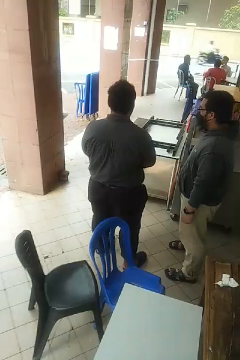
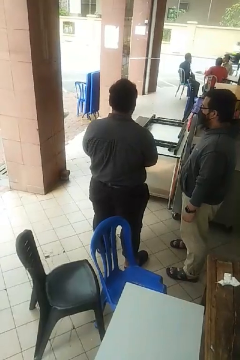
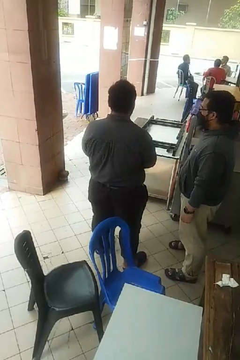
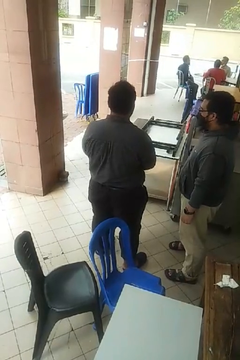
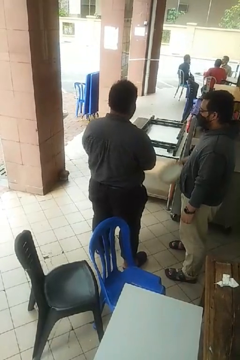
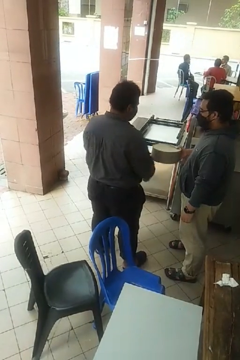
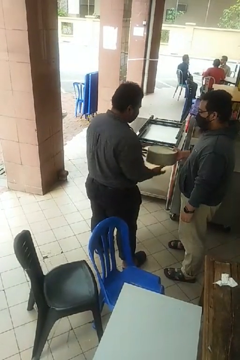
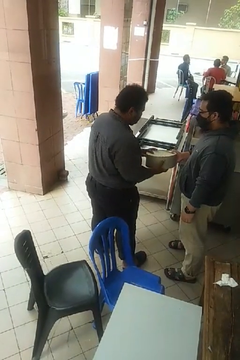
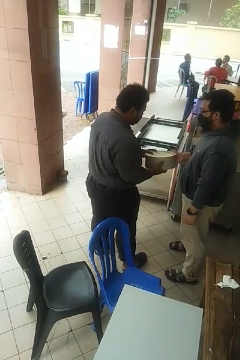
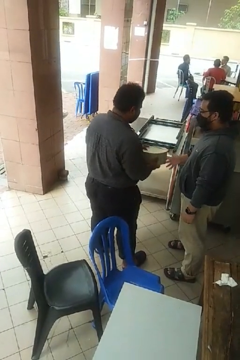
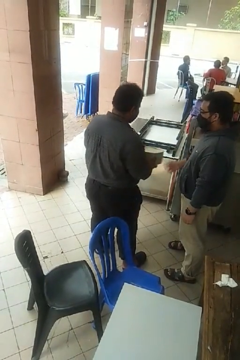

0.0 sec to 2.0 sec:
person transfers object to person

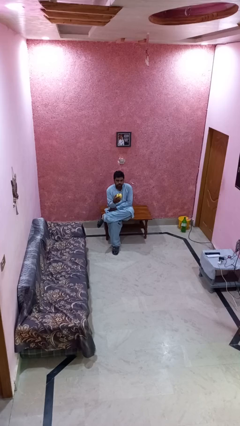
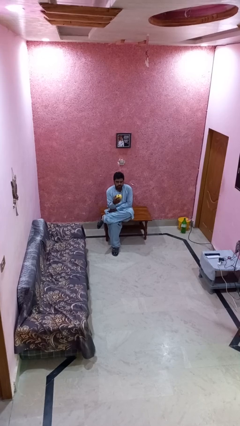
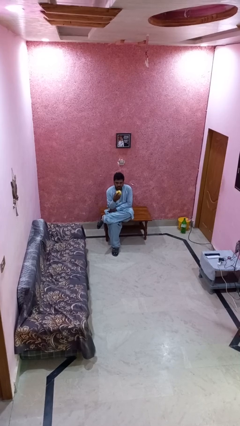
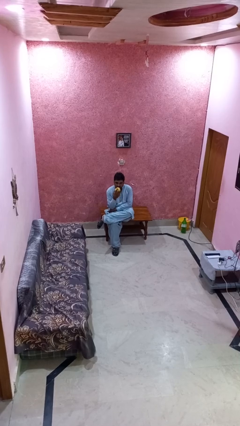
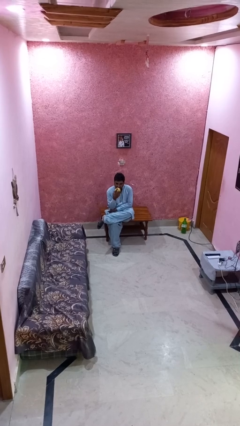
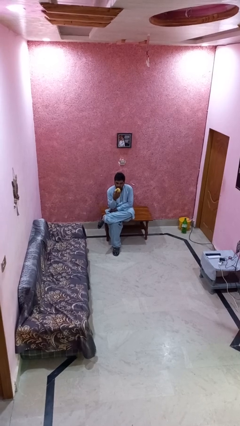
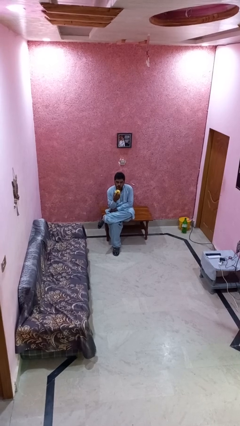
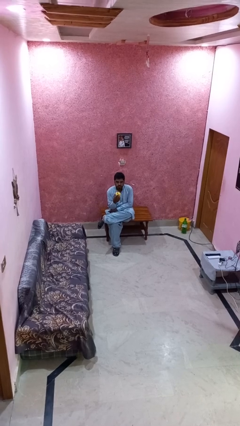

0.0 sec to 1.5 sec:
person eats apple

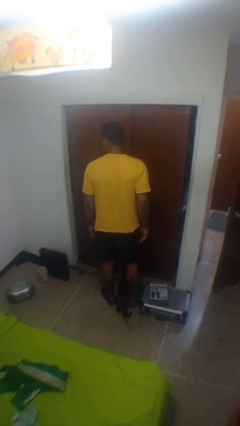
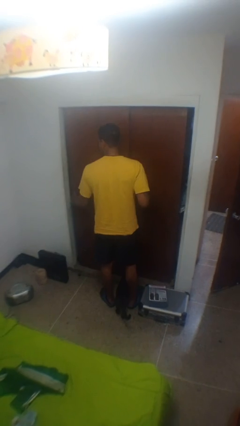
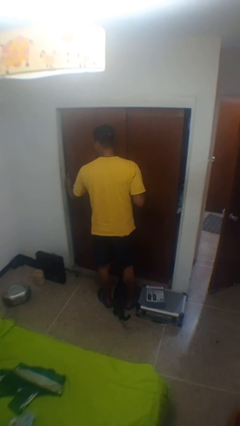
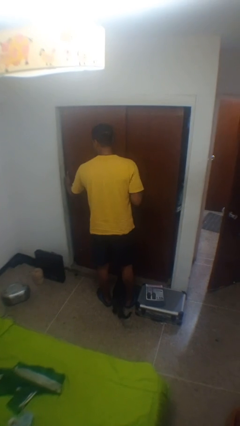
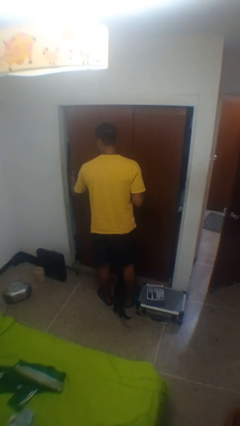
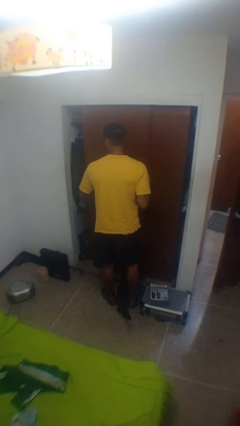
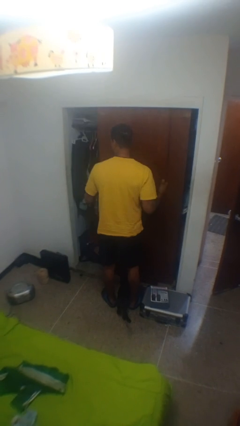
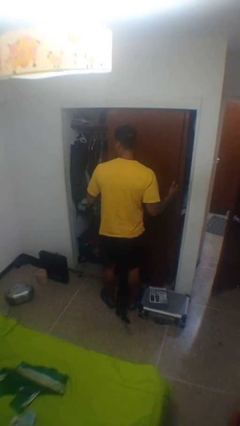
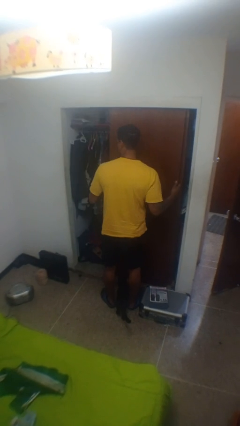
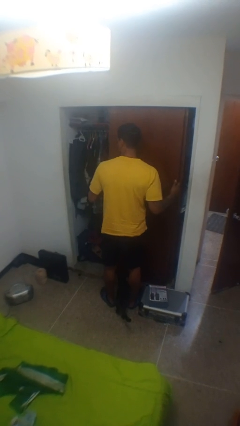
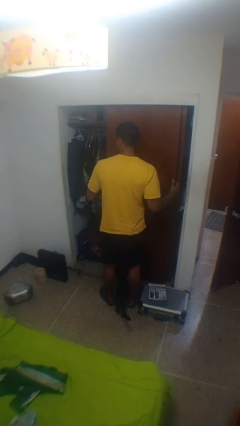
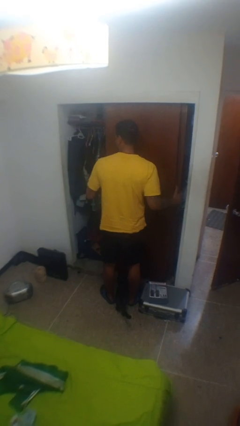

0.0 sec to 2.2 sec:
person opens closet door

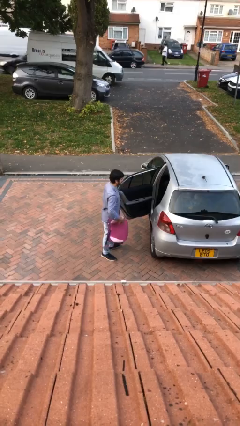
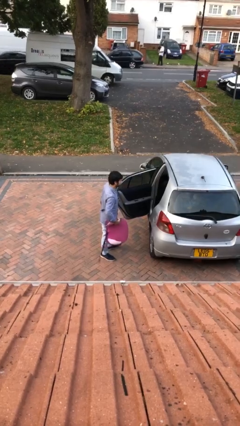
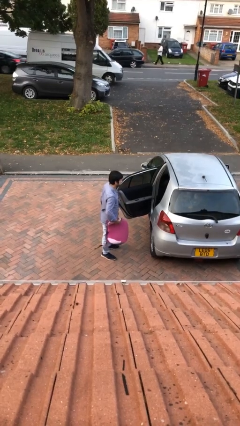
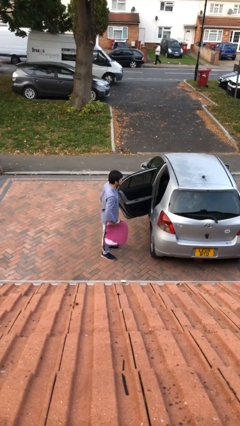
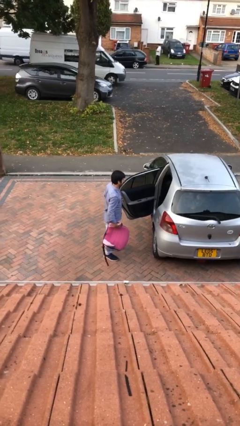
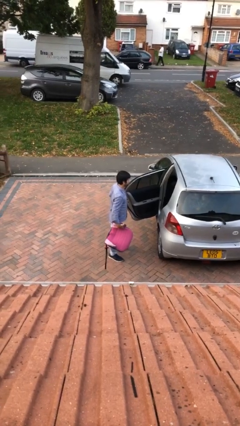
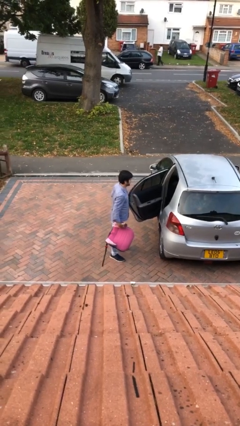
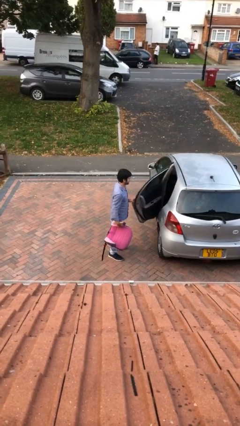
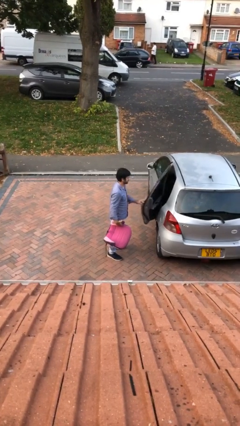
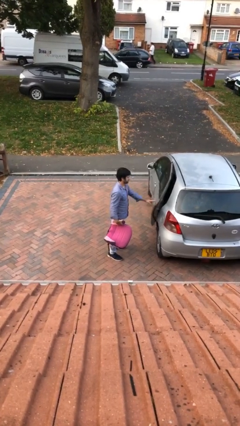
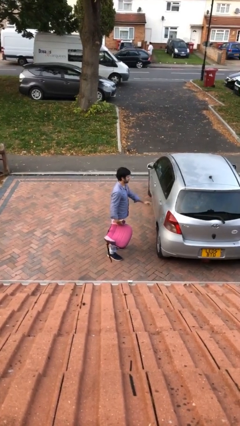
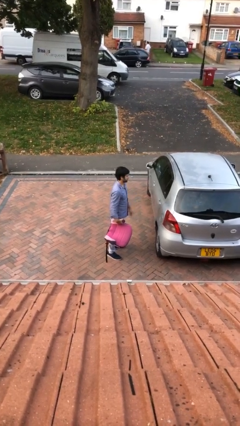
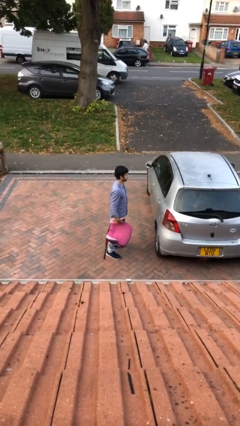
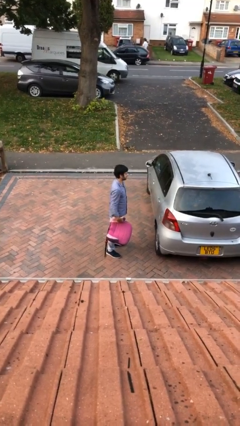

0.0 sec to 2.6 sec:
person closes car door

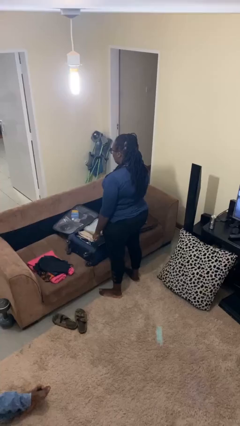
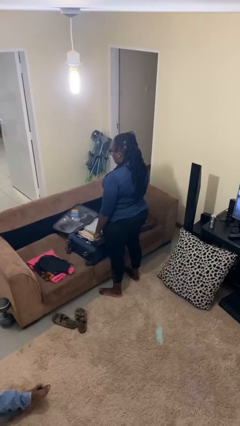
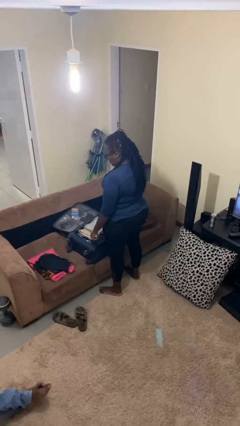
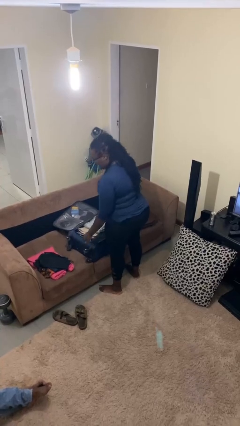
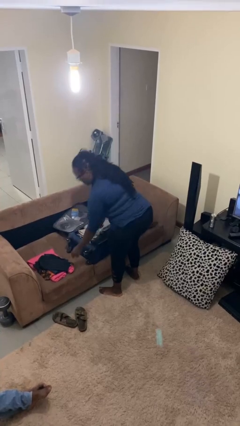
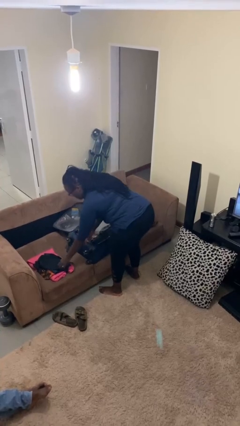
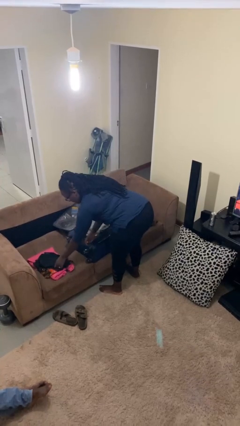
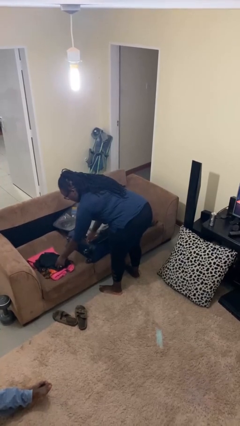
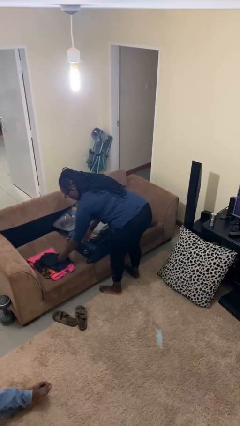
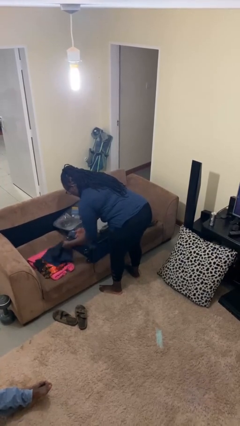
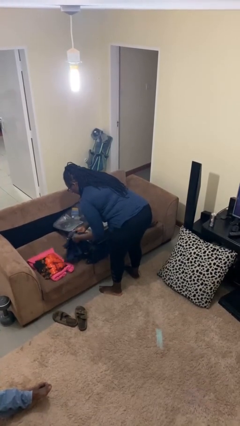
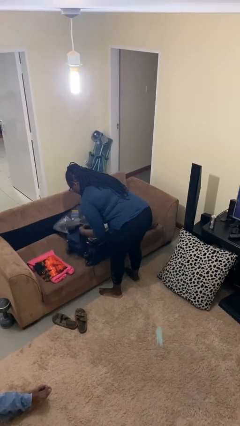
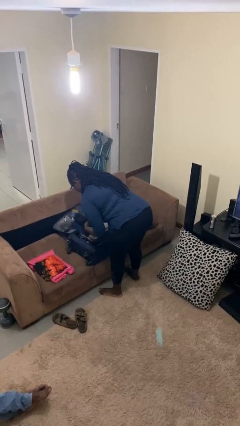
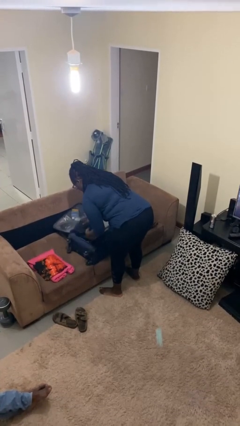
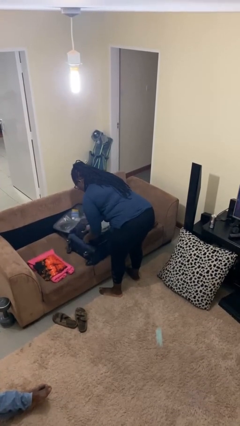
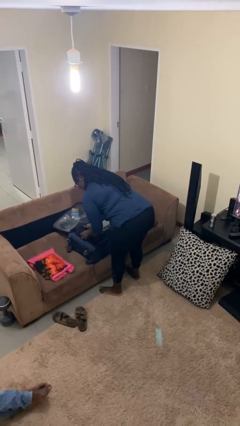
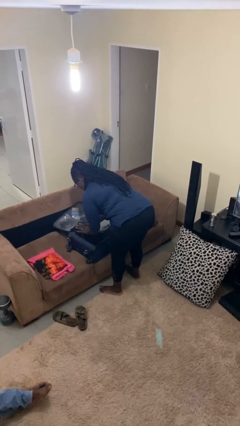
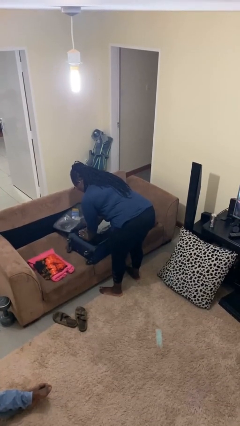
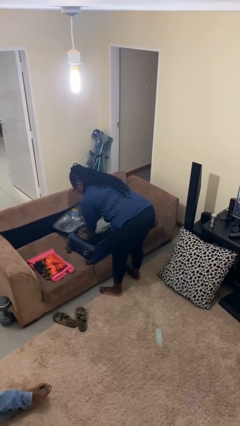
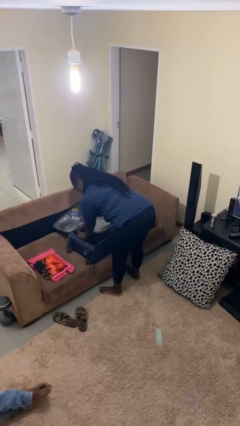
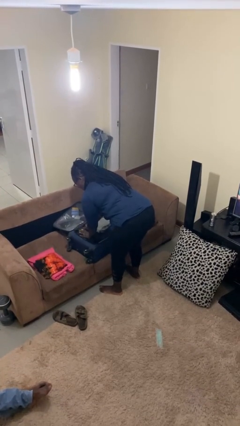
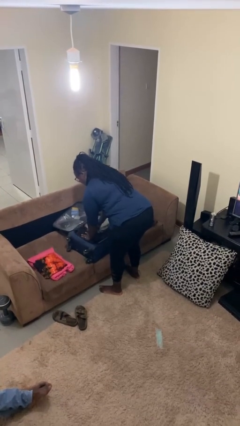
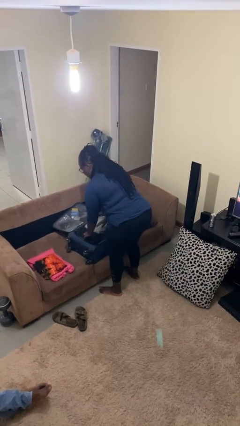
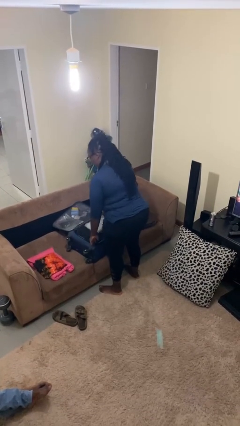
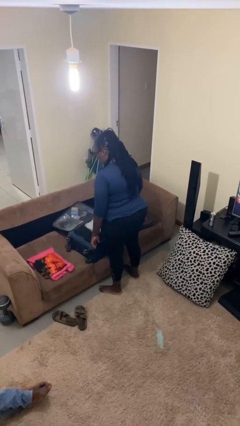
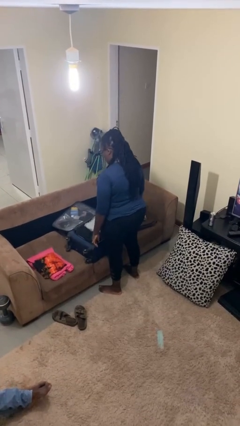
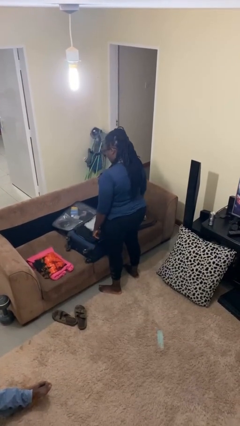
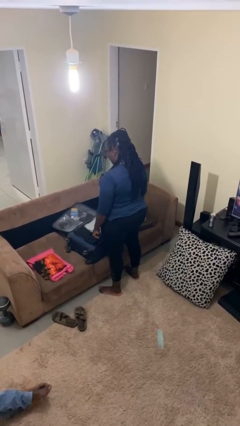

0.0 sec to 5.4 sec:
person loads clothes into suitcase

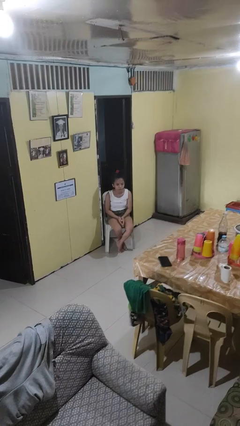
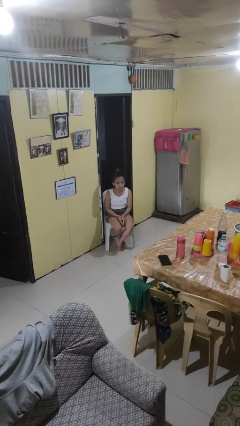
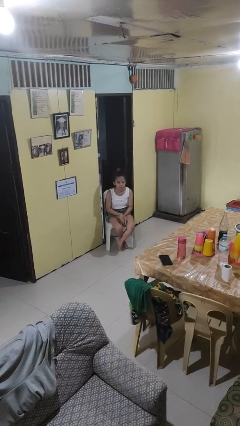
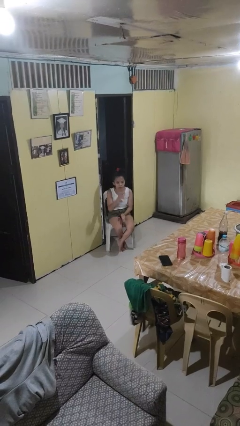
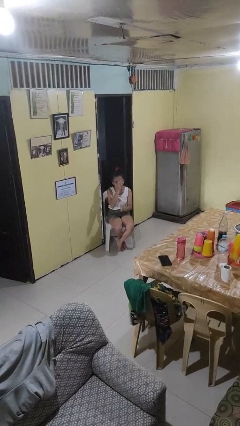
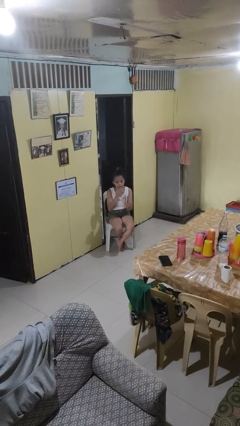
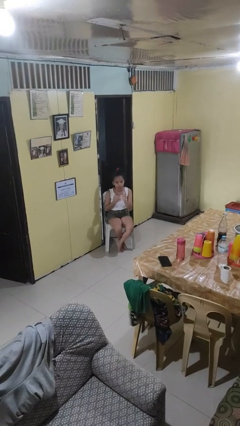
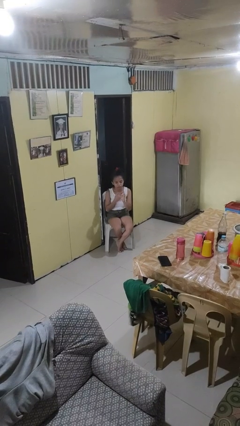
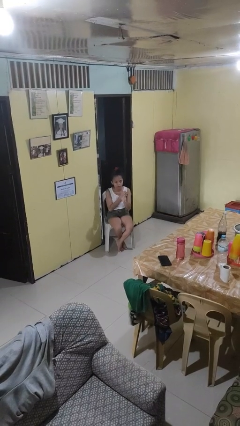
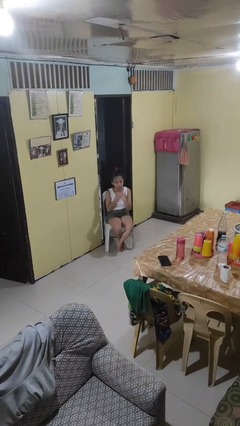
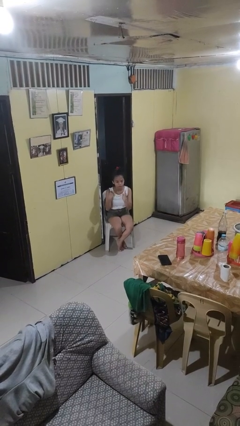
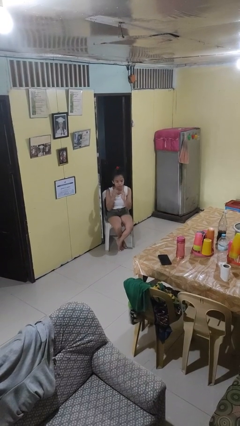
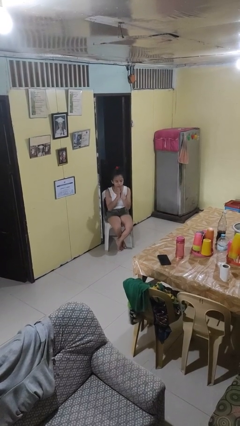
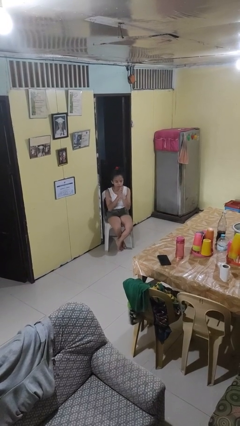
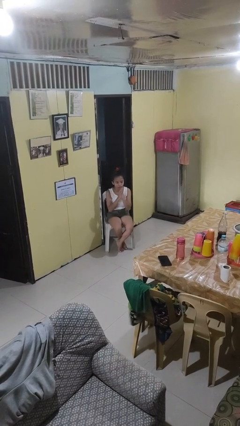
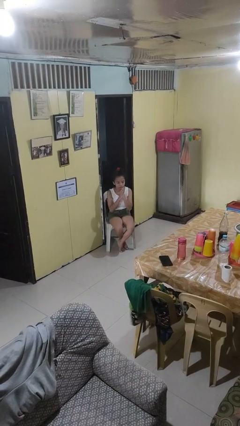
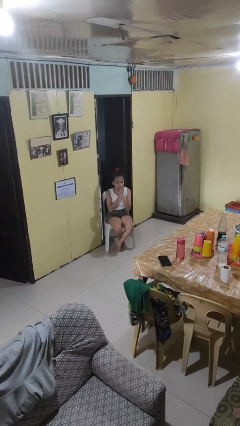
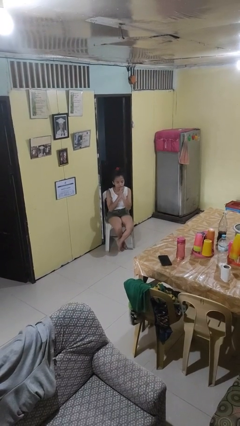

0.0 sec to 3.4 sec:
person prays

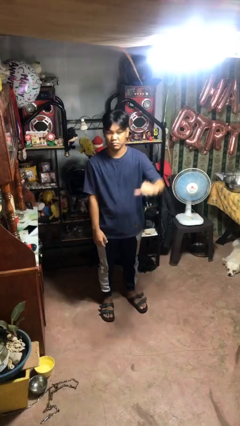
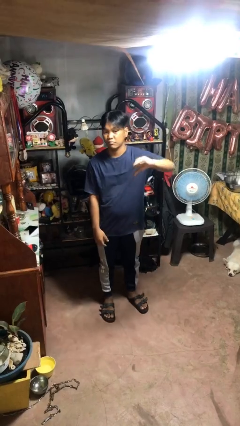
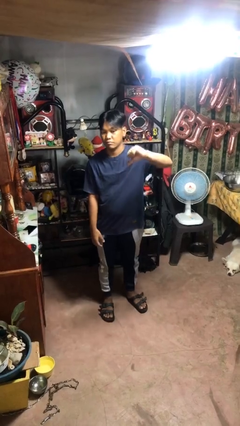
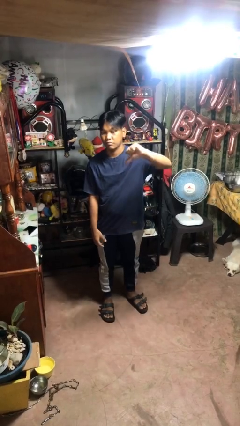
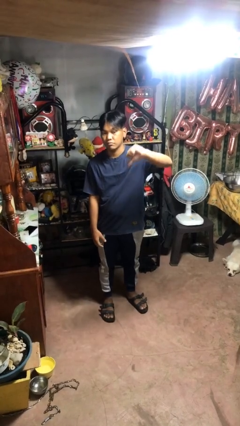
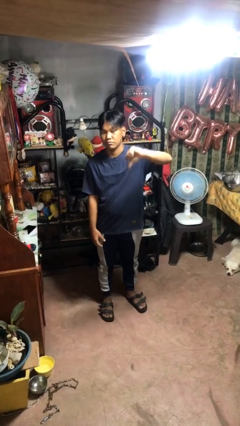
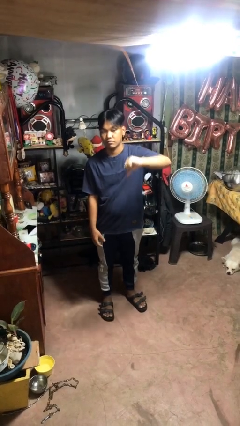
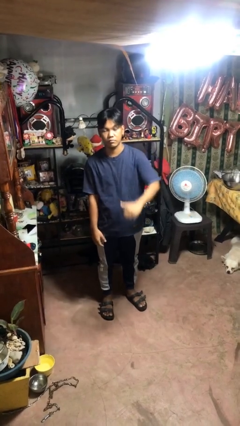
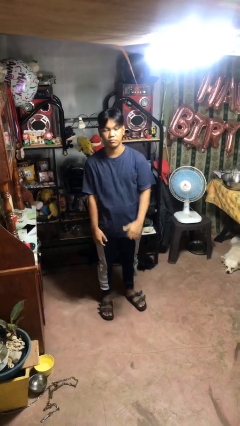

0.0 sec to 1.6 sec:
person gestures thumbs down
